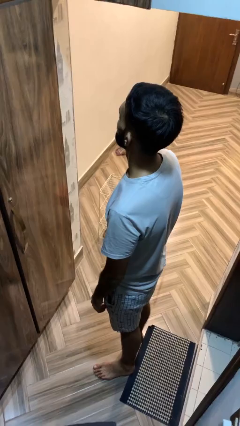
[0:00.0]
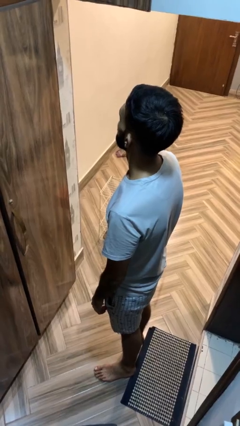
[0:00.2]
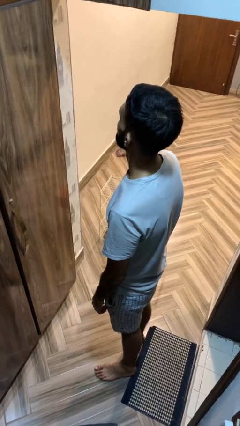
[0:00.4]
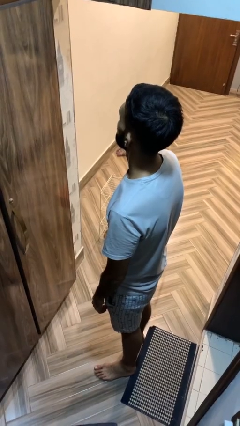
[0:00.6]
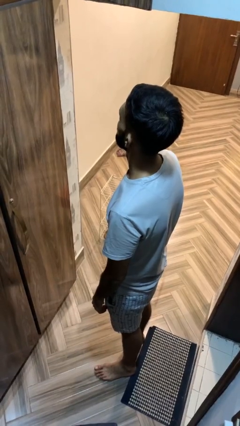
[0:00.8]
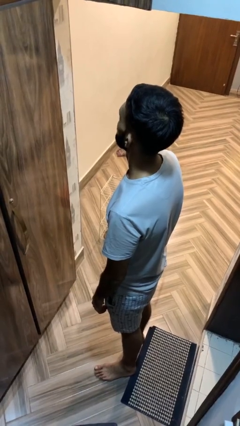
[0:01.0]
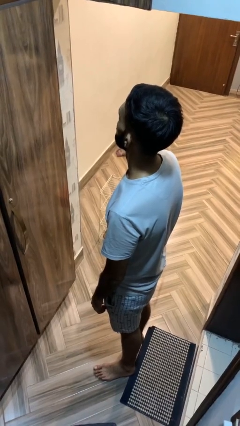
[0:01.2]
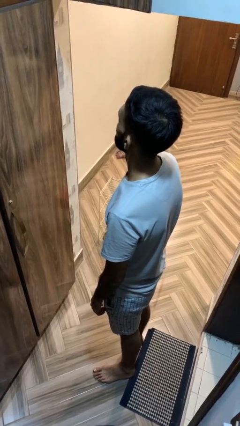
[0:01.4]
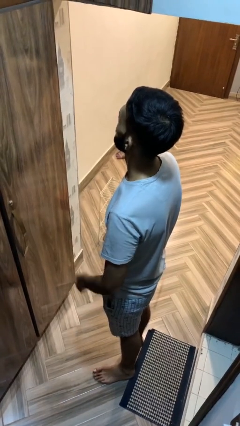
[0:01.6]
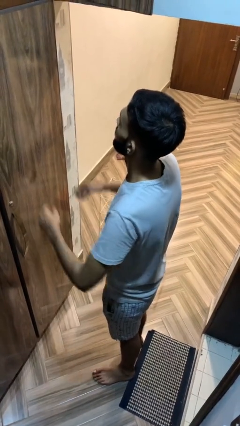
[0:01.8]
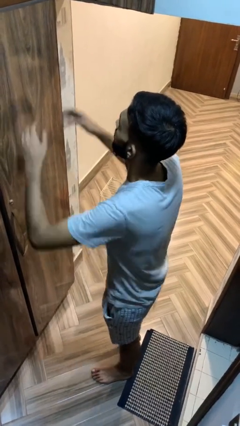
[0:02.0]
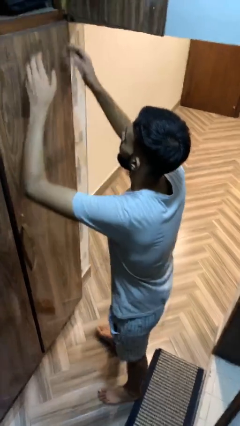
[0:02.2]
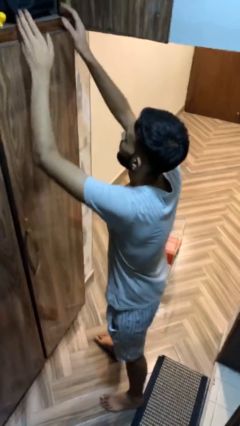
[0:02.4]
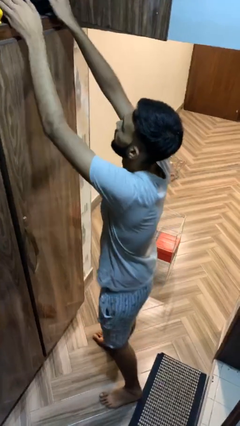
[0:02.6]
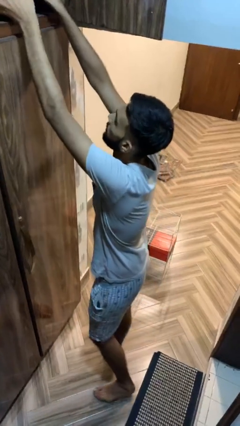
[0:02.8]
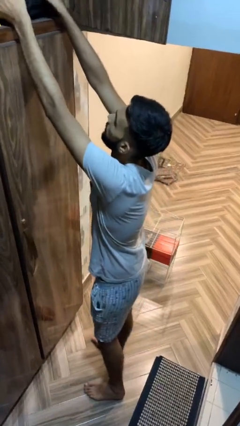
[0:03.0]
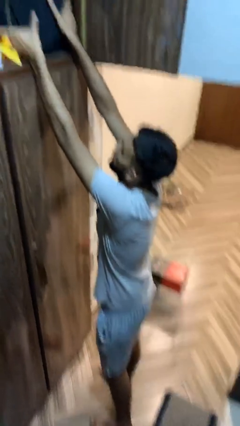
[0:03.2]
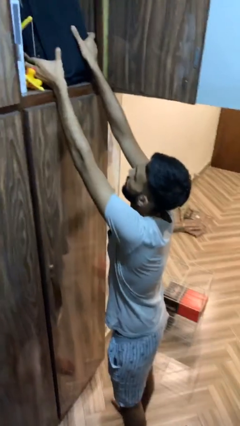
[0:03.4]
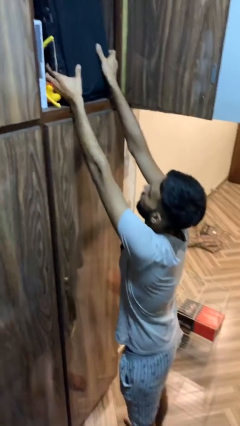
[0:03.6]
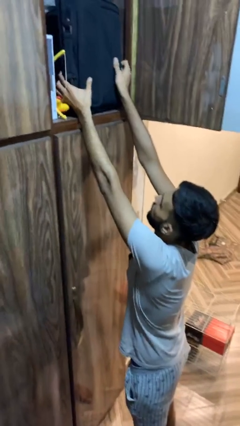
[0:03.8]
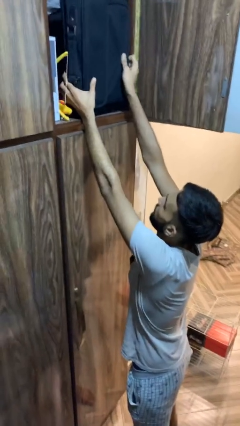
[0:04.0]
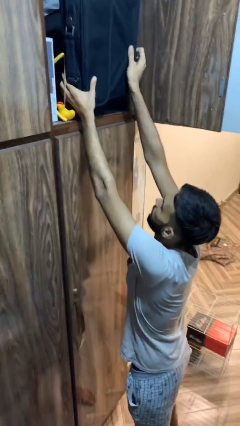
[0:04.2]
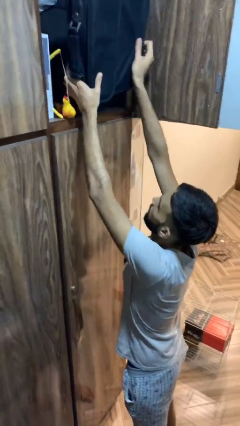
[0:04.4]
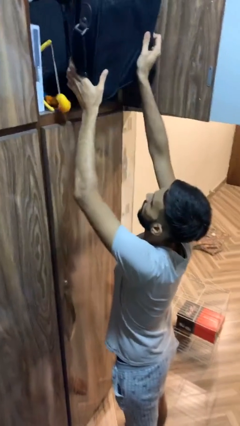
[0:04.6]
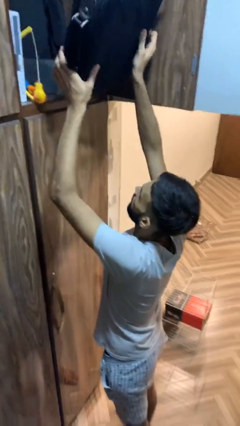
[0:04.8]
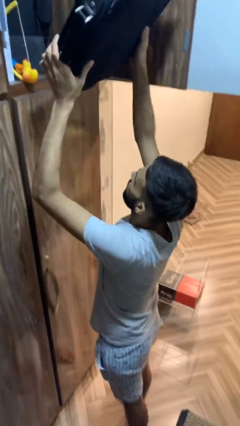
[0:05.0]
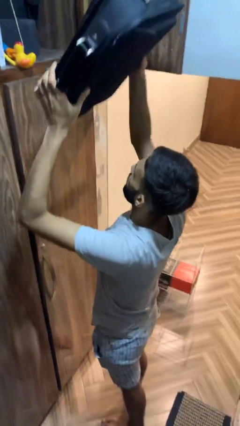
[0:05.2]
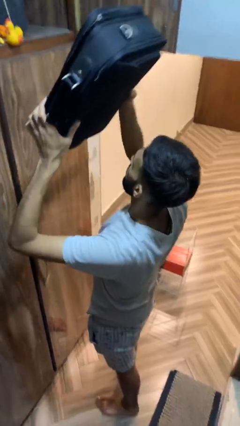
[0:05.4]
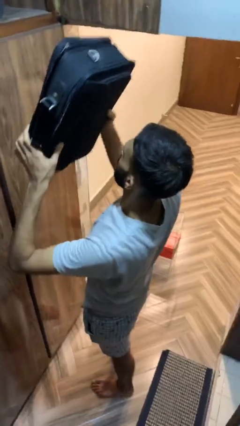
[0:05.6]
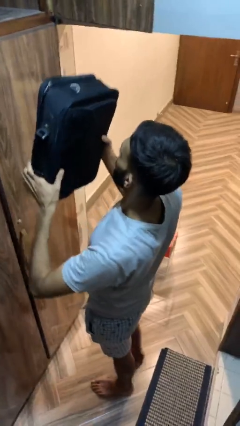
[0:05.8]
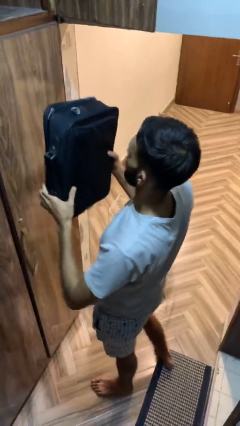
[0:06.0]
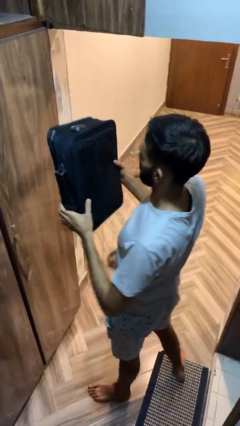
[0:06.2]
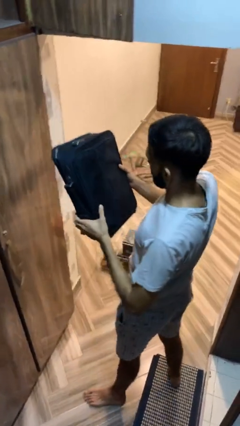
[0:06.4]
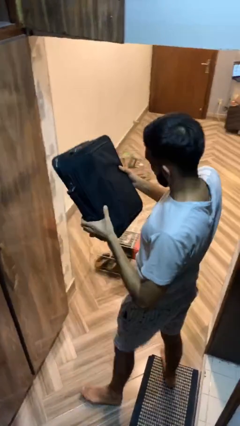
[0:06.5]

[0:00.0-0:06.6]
person picks up object from shelf

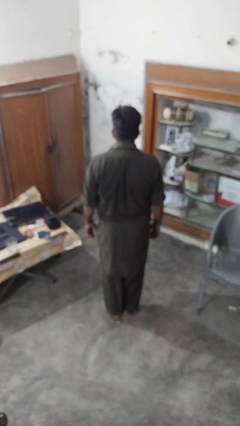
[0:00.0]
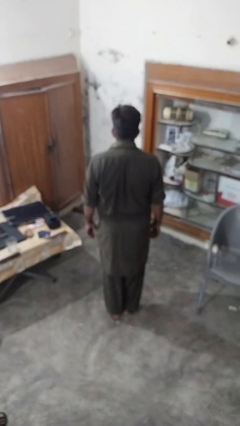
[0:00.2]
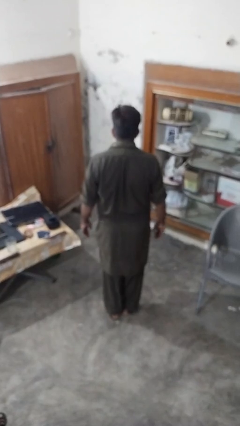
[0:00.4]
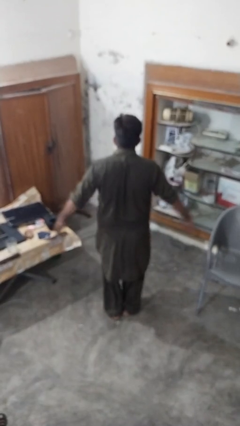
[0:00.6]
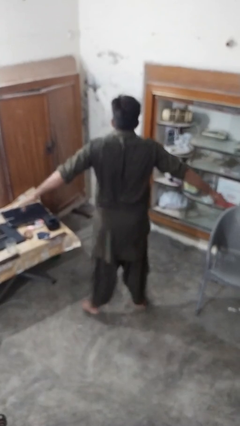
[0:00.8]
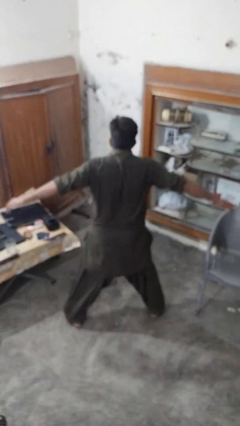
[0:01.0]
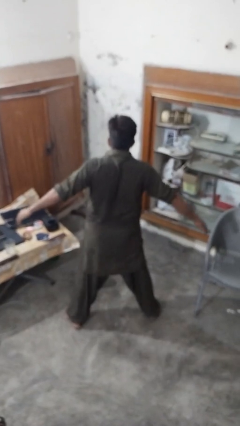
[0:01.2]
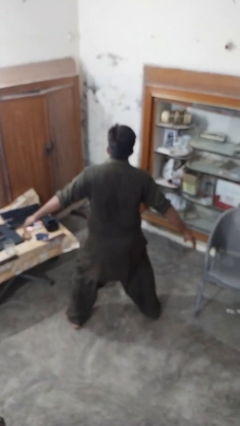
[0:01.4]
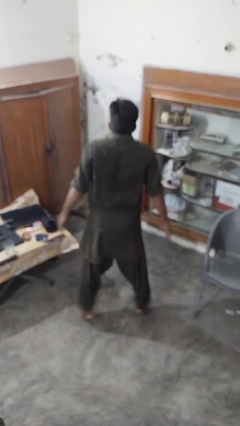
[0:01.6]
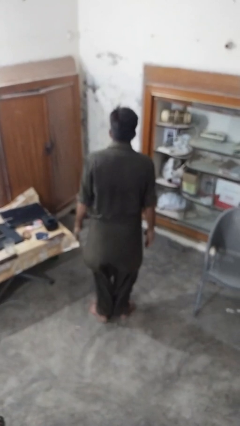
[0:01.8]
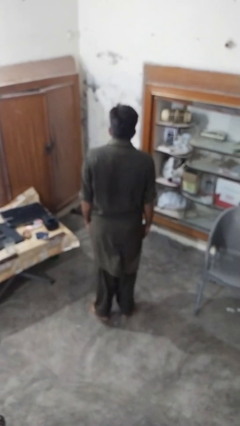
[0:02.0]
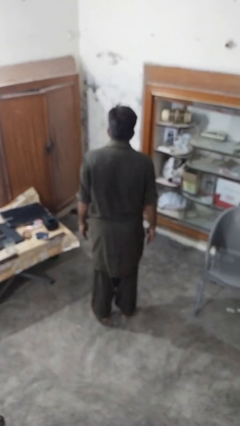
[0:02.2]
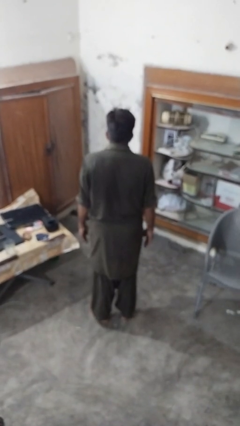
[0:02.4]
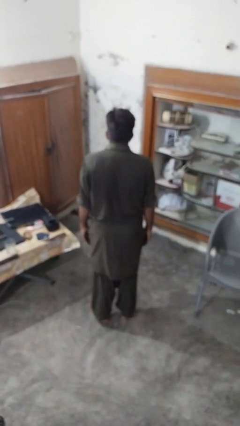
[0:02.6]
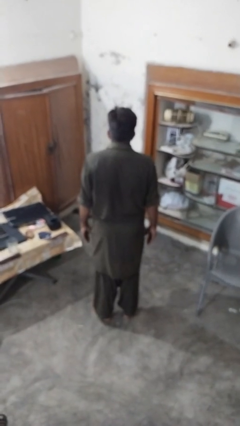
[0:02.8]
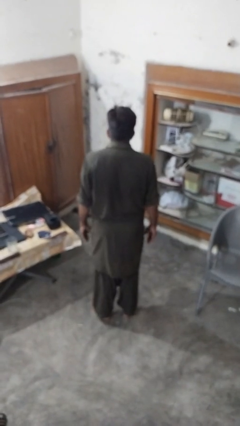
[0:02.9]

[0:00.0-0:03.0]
person exercises with jumping jacks

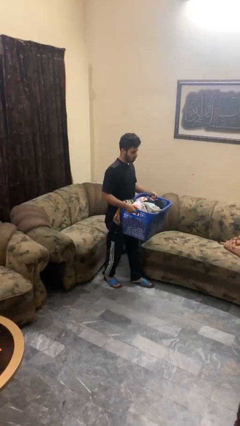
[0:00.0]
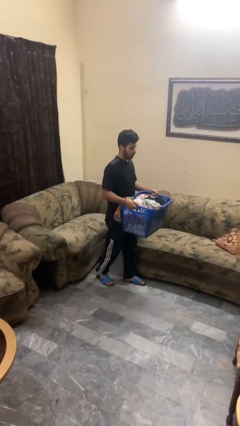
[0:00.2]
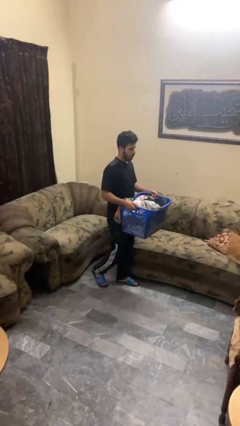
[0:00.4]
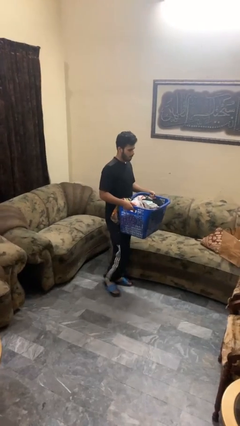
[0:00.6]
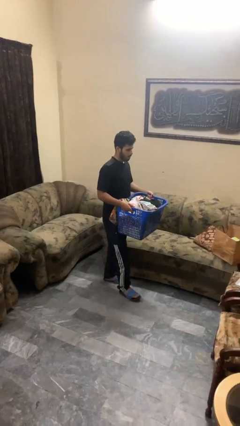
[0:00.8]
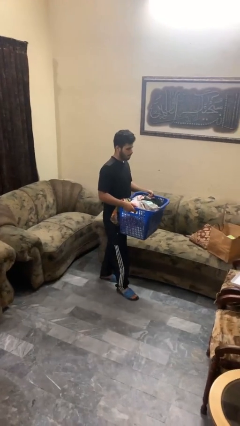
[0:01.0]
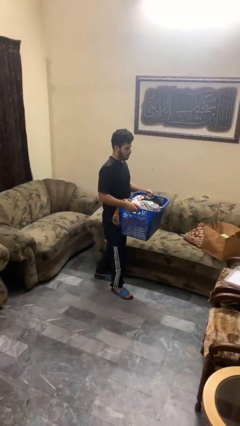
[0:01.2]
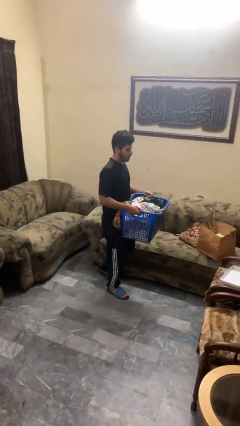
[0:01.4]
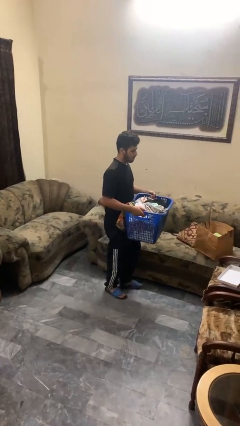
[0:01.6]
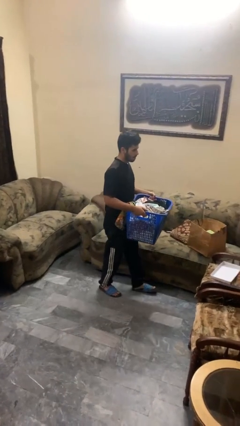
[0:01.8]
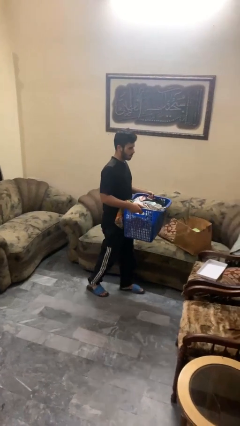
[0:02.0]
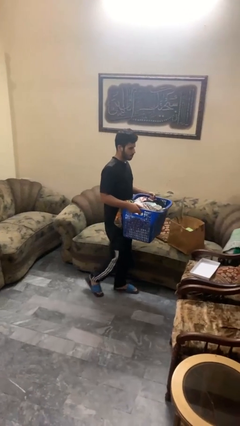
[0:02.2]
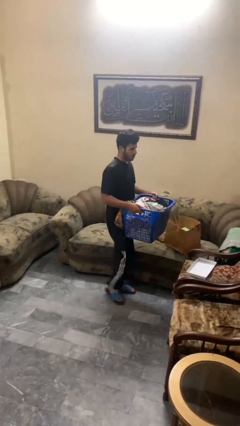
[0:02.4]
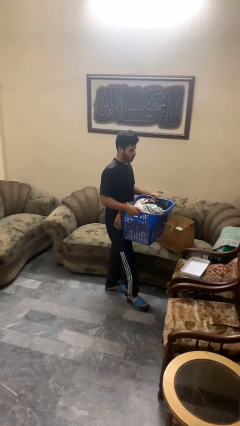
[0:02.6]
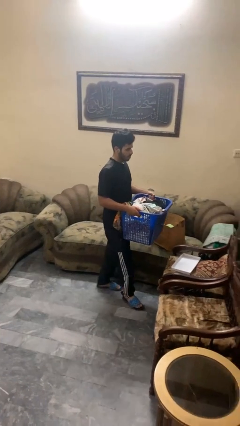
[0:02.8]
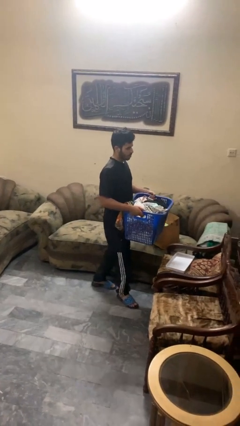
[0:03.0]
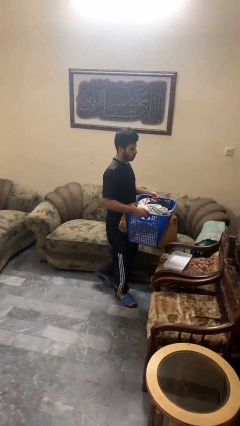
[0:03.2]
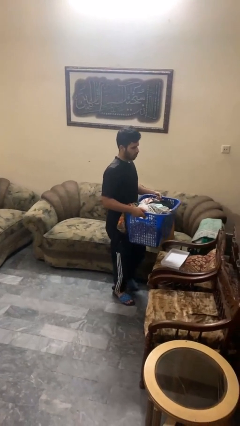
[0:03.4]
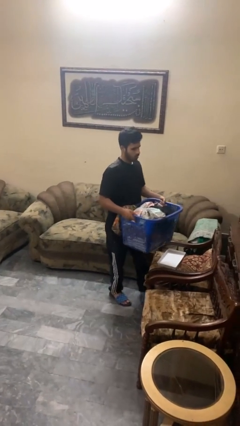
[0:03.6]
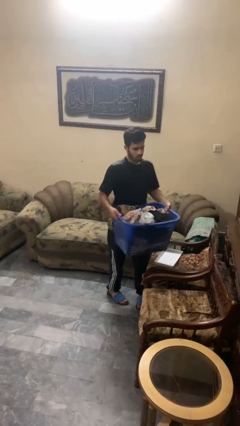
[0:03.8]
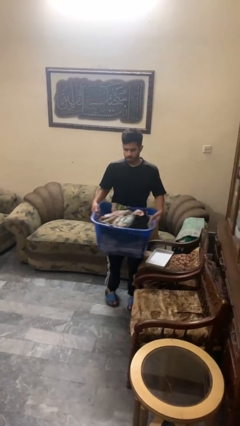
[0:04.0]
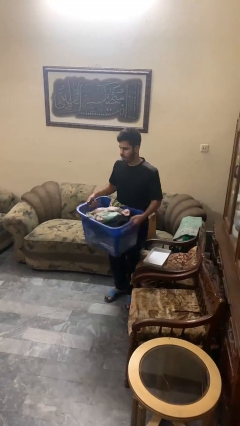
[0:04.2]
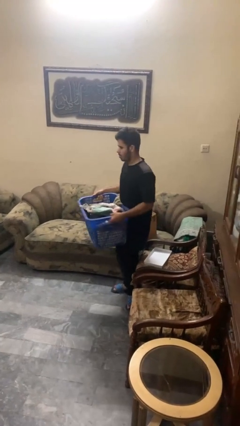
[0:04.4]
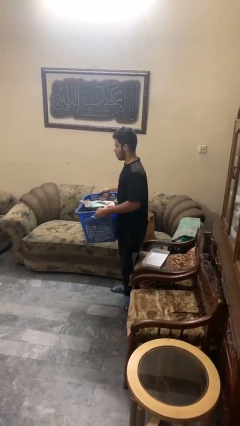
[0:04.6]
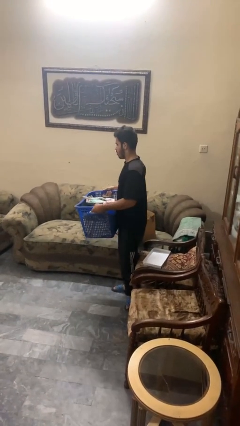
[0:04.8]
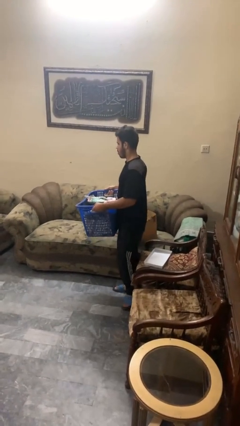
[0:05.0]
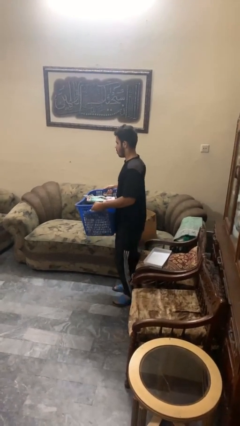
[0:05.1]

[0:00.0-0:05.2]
person carries laundry basket

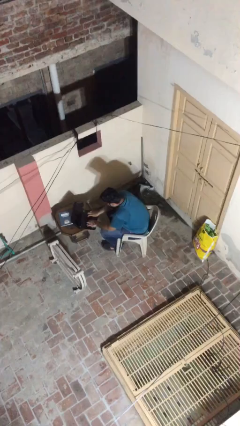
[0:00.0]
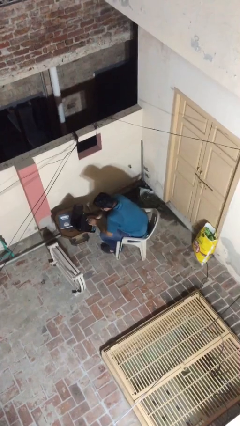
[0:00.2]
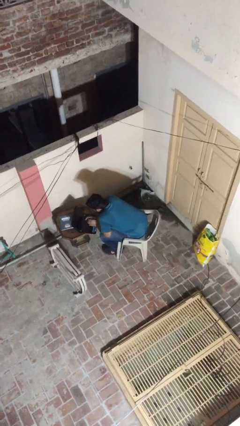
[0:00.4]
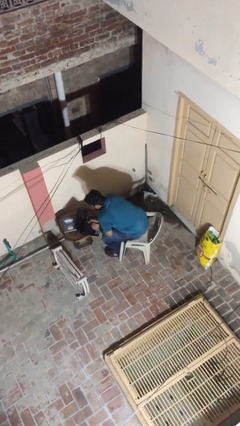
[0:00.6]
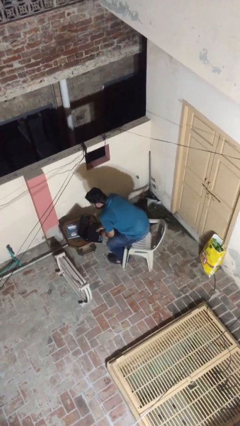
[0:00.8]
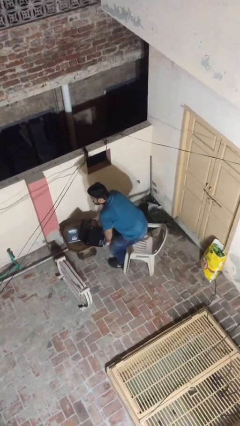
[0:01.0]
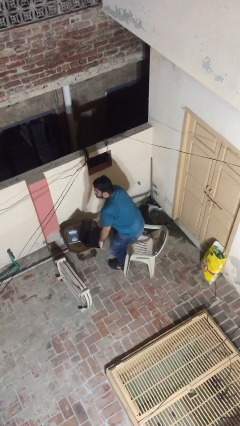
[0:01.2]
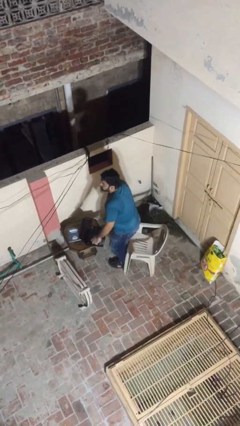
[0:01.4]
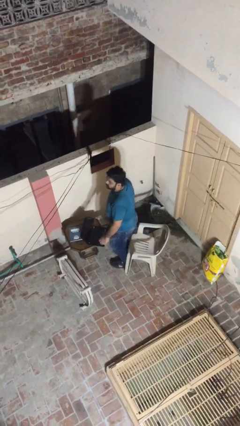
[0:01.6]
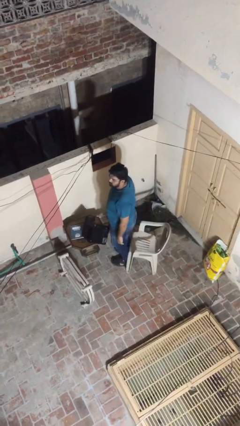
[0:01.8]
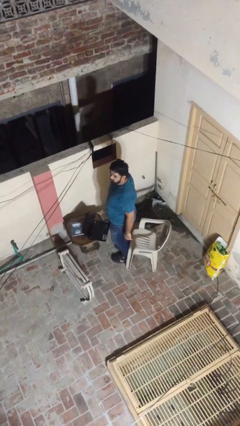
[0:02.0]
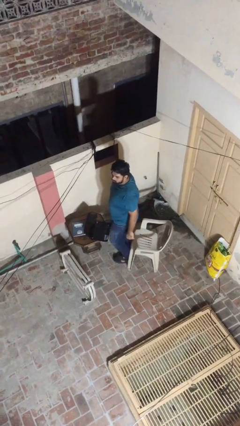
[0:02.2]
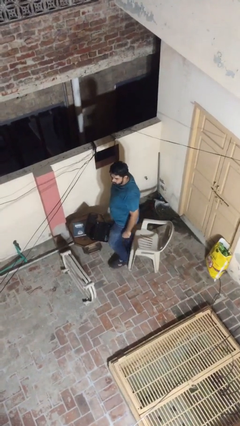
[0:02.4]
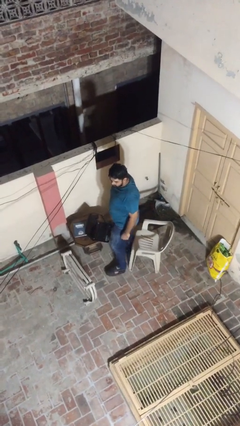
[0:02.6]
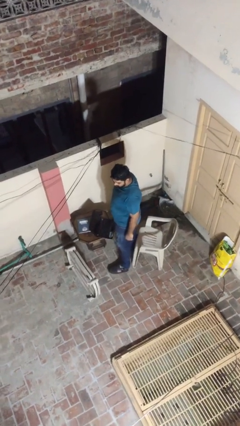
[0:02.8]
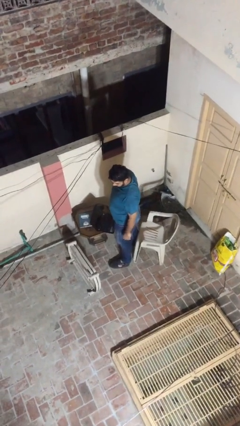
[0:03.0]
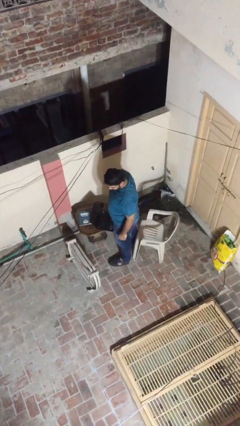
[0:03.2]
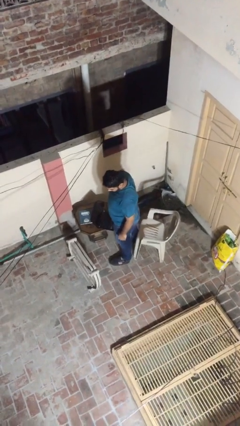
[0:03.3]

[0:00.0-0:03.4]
person stands up
